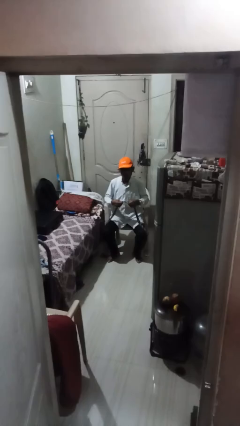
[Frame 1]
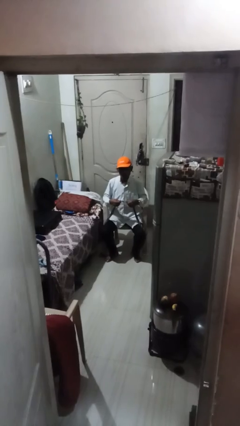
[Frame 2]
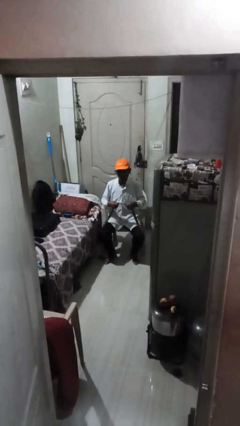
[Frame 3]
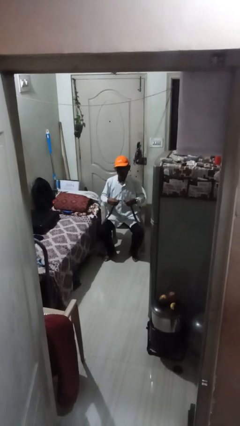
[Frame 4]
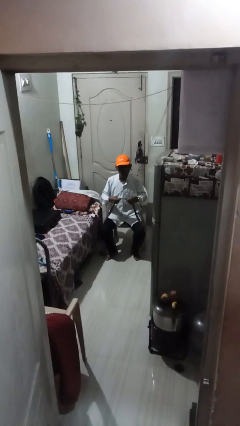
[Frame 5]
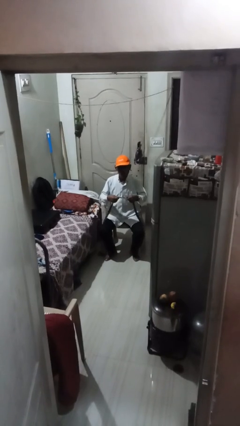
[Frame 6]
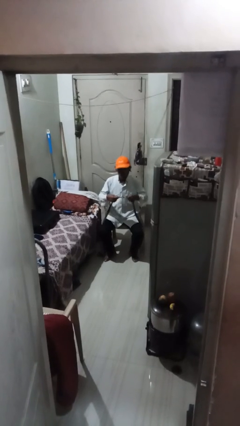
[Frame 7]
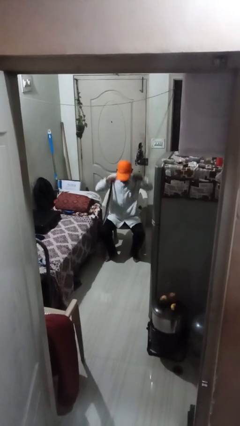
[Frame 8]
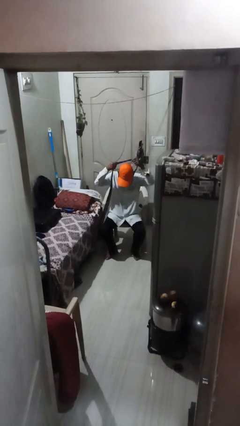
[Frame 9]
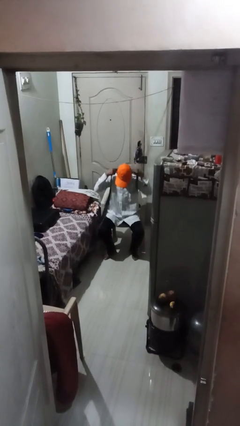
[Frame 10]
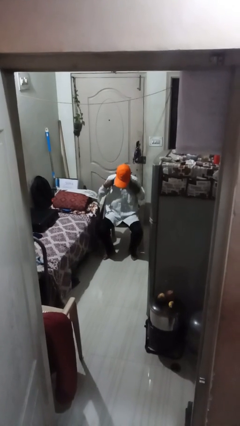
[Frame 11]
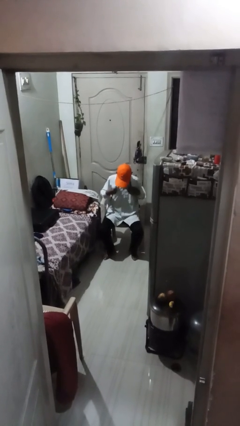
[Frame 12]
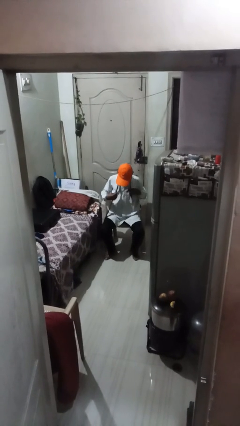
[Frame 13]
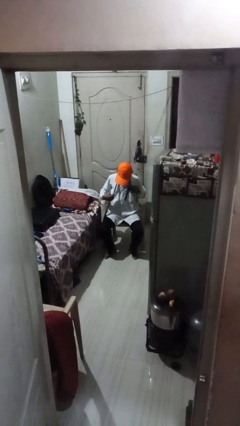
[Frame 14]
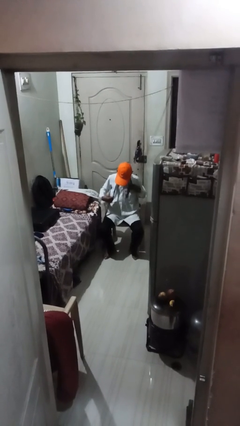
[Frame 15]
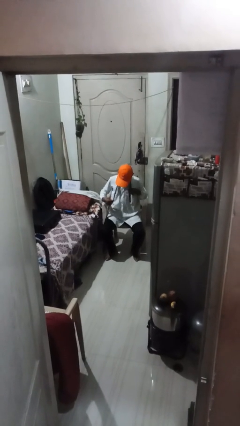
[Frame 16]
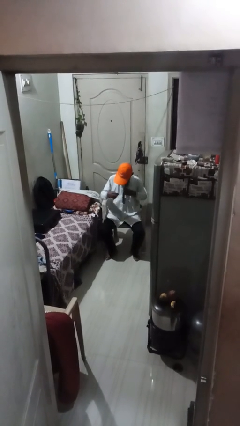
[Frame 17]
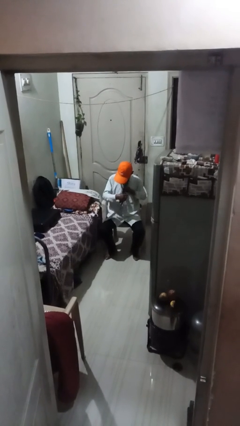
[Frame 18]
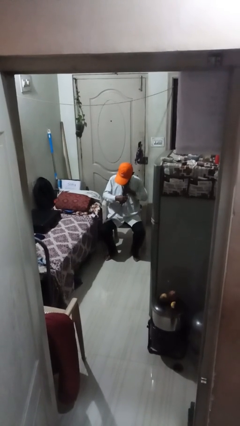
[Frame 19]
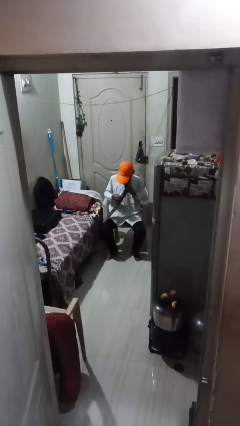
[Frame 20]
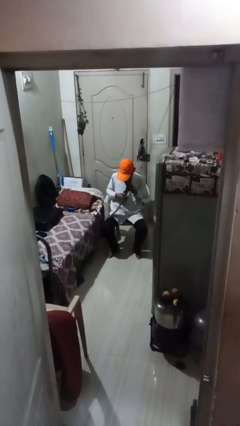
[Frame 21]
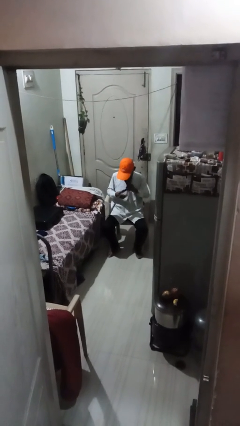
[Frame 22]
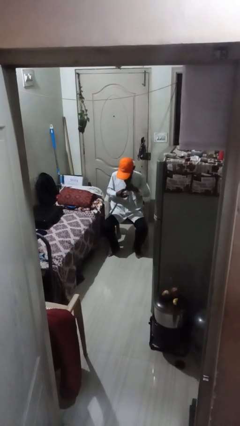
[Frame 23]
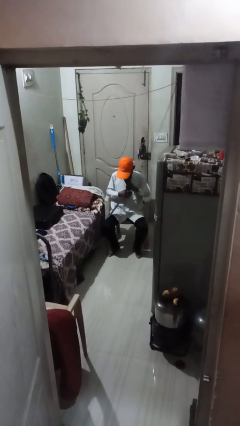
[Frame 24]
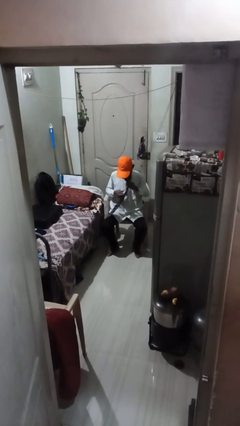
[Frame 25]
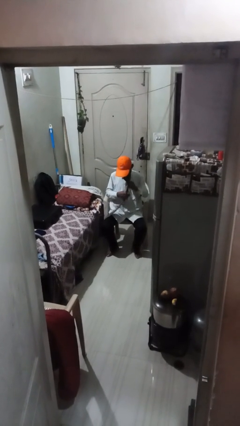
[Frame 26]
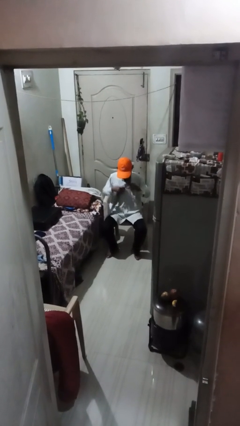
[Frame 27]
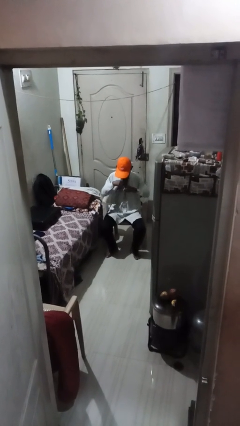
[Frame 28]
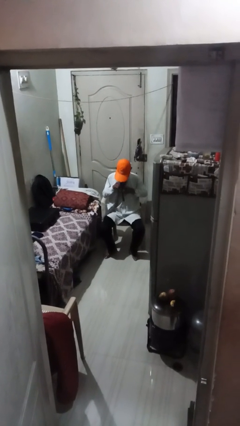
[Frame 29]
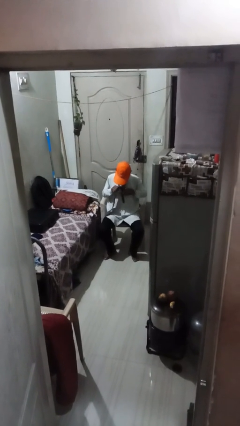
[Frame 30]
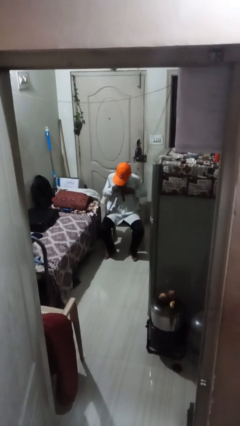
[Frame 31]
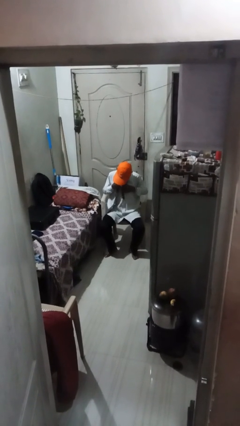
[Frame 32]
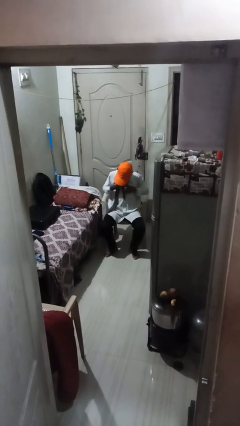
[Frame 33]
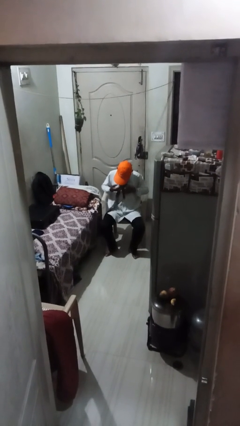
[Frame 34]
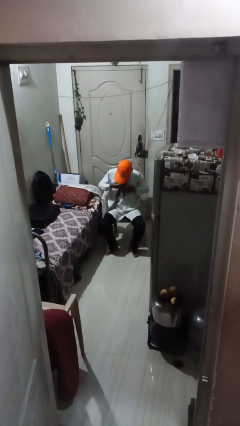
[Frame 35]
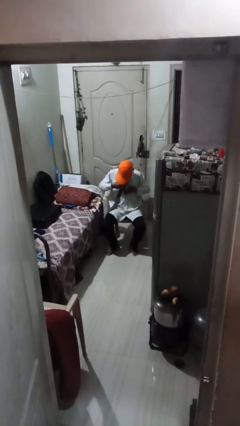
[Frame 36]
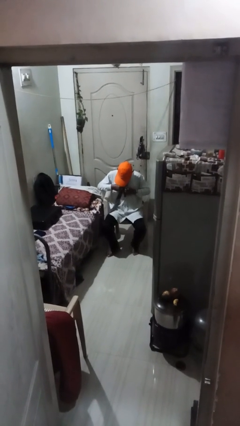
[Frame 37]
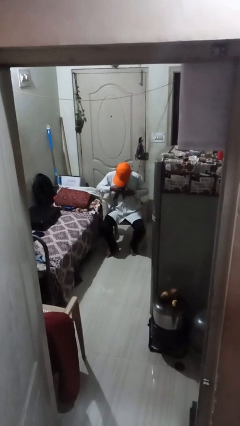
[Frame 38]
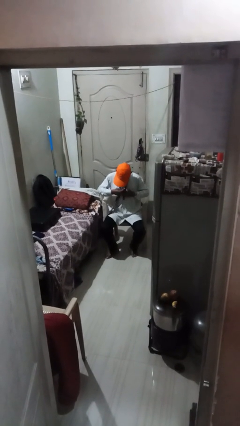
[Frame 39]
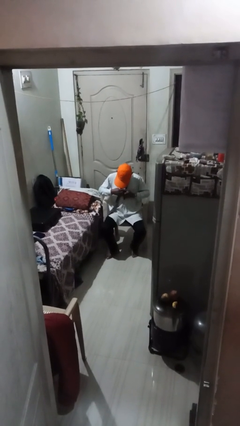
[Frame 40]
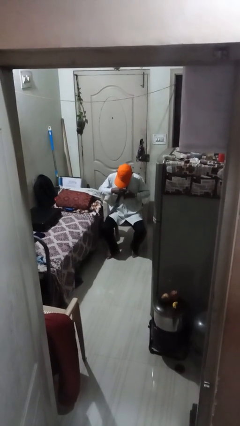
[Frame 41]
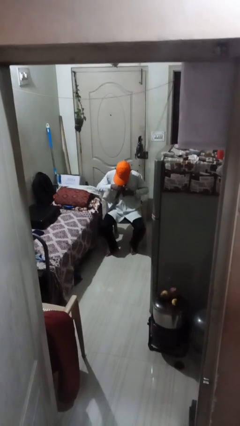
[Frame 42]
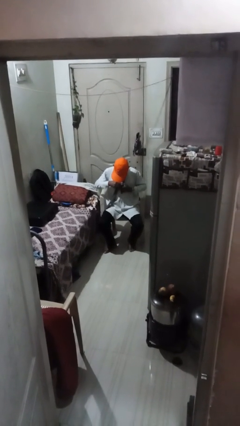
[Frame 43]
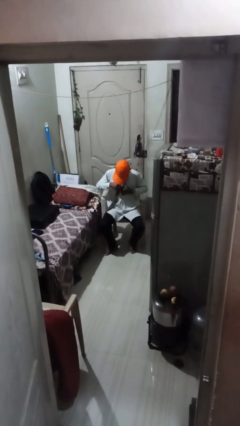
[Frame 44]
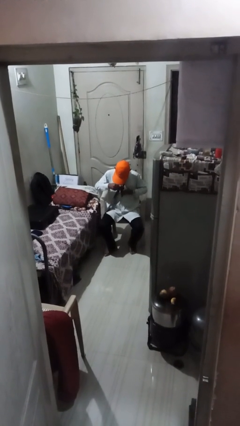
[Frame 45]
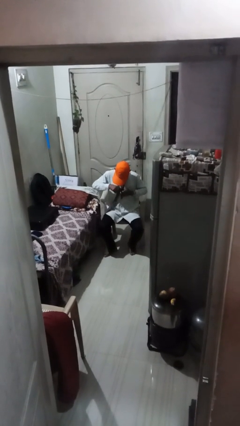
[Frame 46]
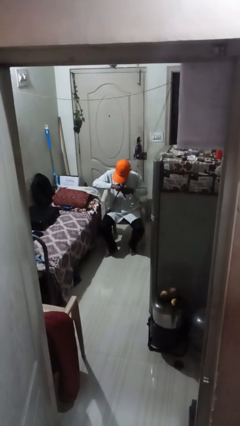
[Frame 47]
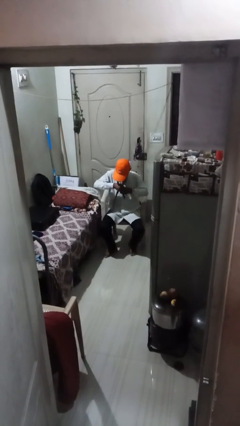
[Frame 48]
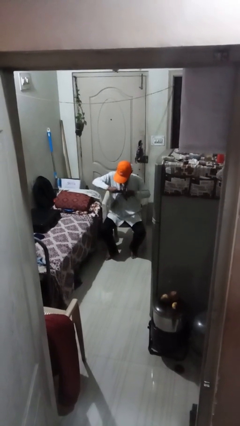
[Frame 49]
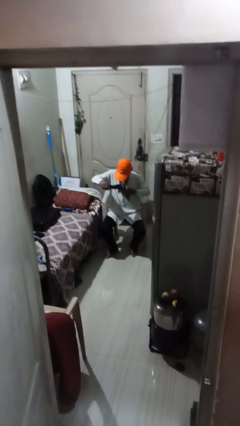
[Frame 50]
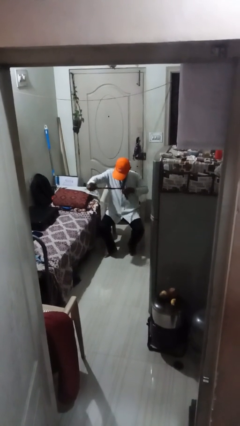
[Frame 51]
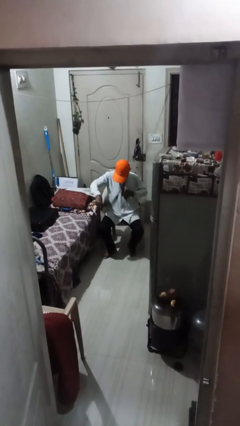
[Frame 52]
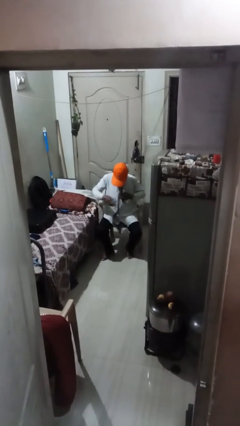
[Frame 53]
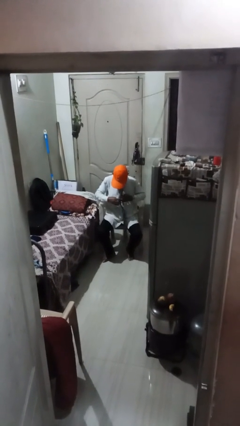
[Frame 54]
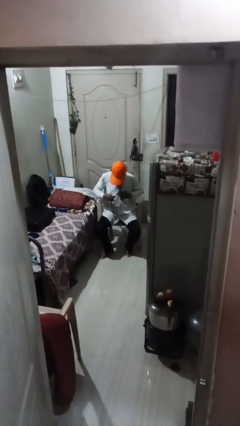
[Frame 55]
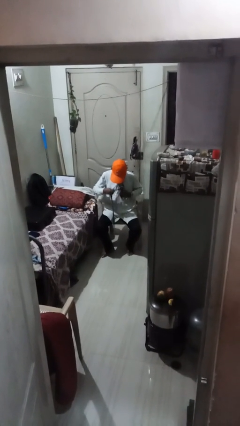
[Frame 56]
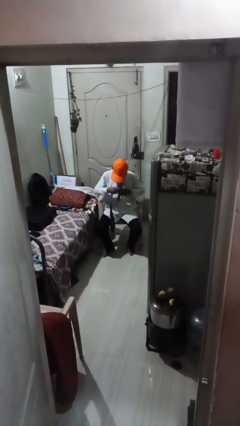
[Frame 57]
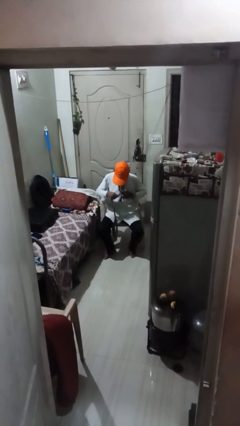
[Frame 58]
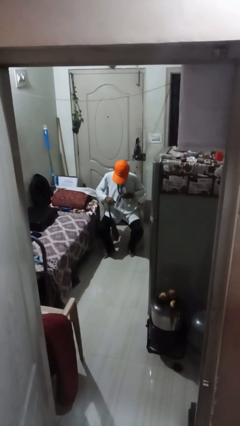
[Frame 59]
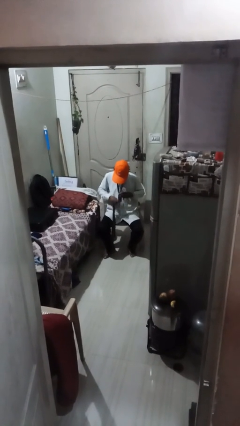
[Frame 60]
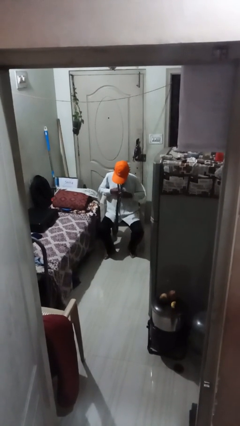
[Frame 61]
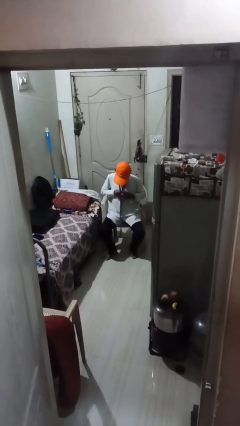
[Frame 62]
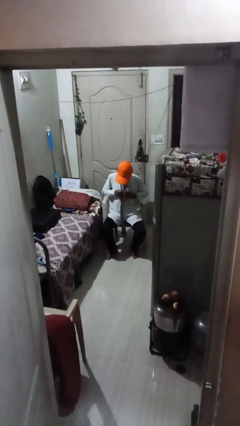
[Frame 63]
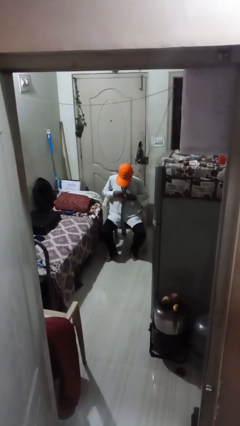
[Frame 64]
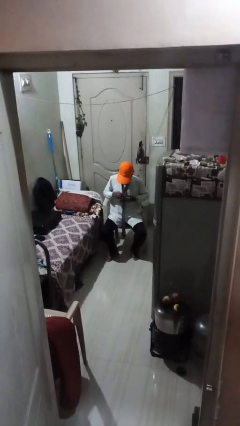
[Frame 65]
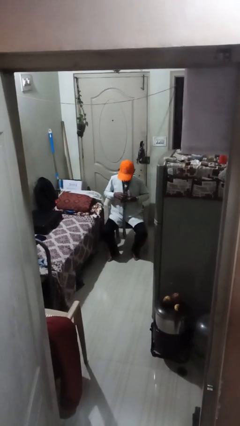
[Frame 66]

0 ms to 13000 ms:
person puts on necktie

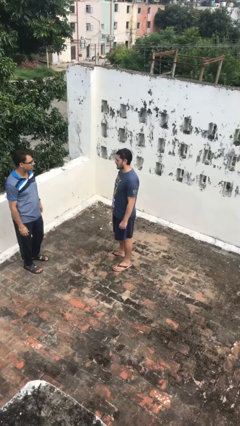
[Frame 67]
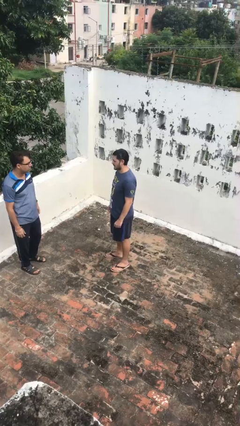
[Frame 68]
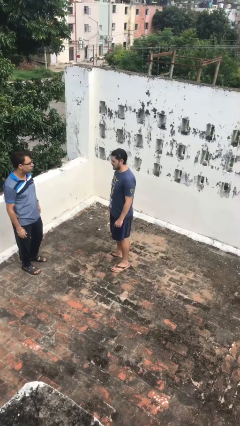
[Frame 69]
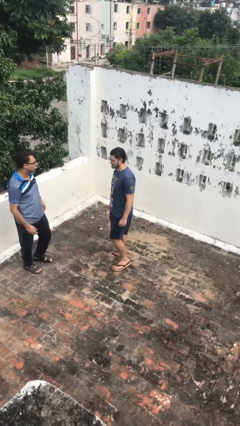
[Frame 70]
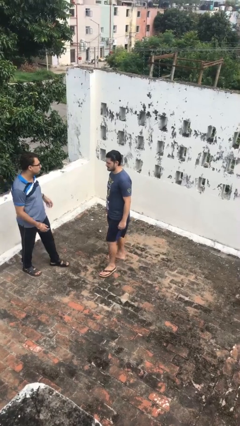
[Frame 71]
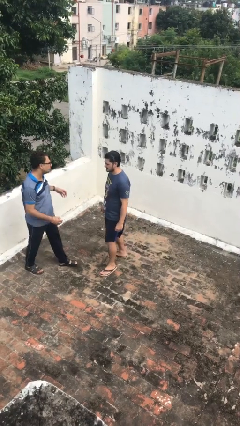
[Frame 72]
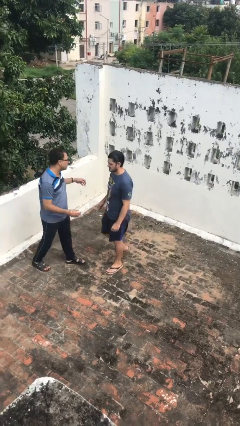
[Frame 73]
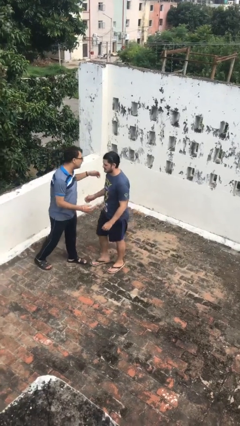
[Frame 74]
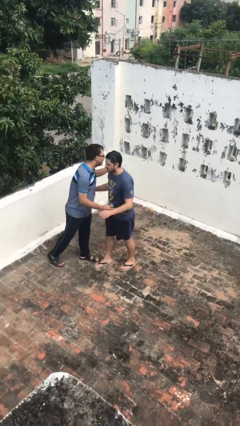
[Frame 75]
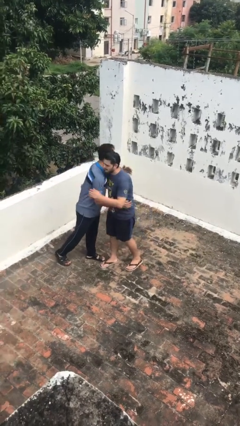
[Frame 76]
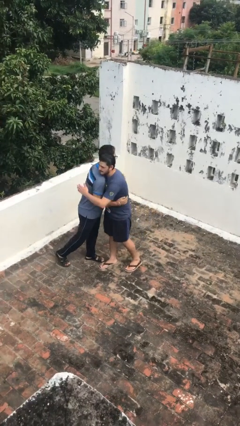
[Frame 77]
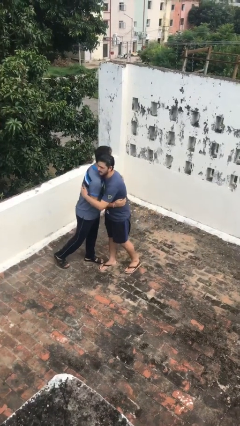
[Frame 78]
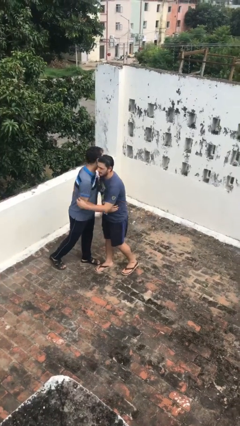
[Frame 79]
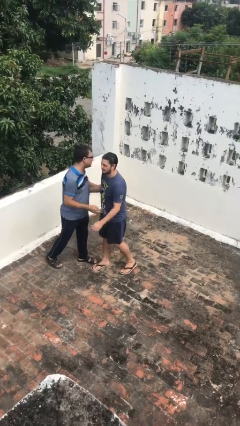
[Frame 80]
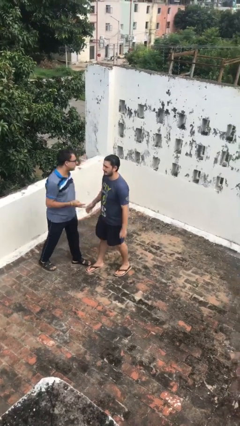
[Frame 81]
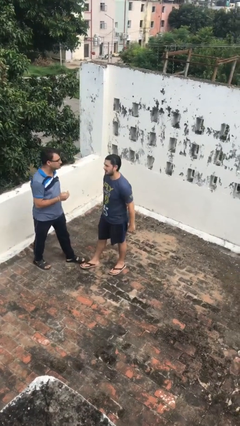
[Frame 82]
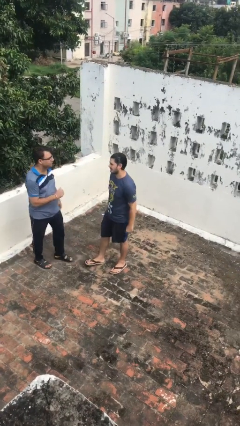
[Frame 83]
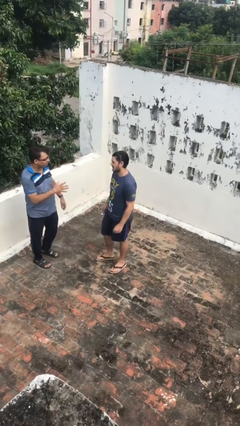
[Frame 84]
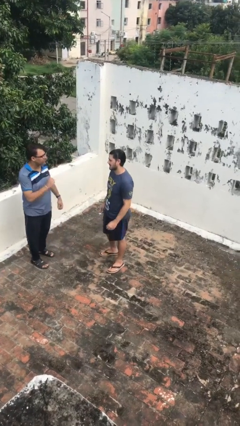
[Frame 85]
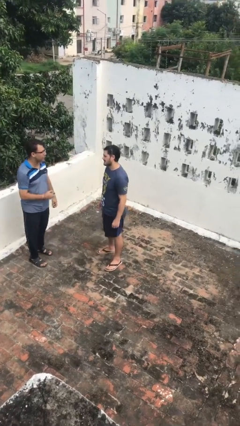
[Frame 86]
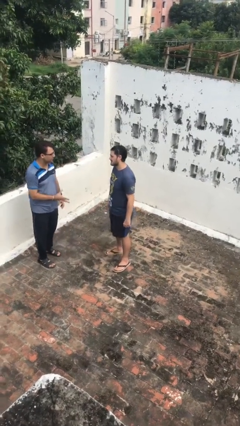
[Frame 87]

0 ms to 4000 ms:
person embraces person

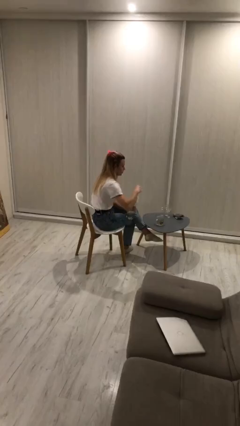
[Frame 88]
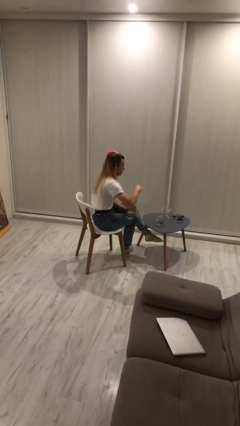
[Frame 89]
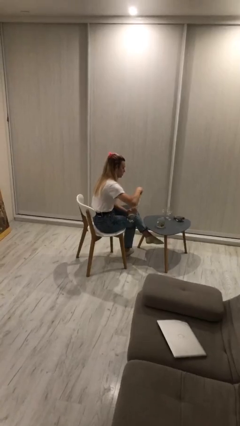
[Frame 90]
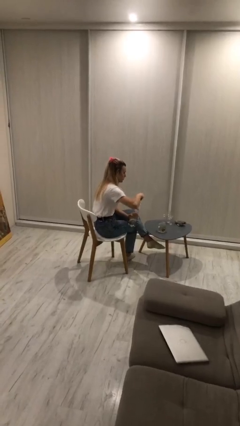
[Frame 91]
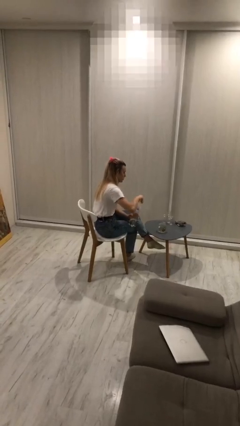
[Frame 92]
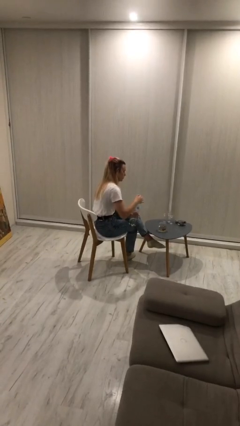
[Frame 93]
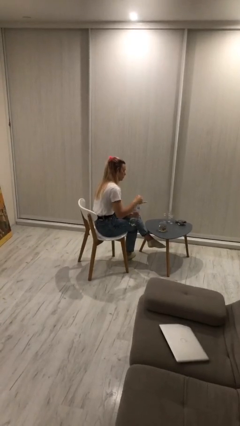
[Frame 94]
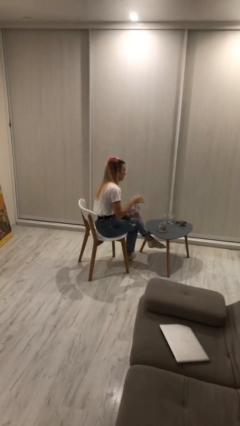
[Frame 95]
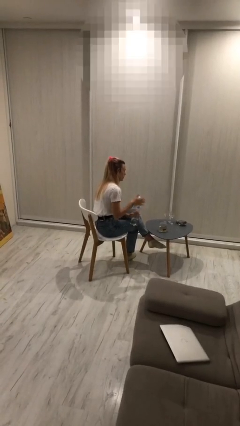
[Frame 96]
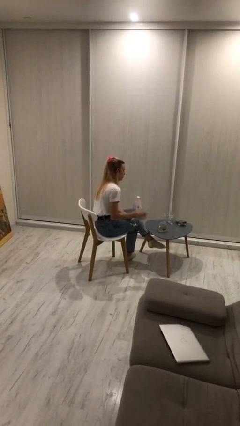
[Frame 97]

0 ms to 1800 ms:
person screws lid to bottle
